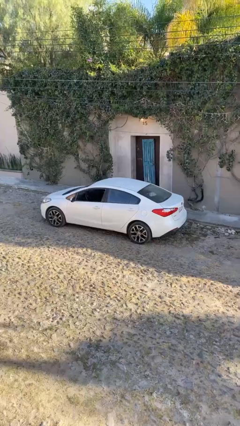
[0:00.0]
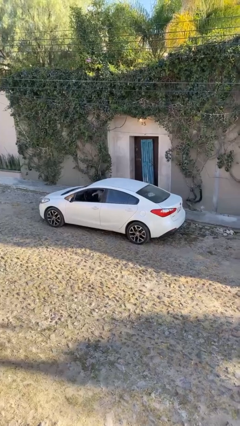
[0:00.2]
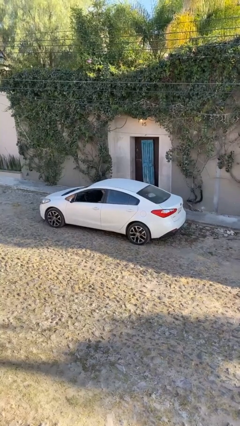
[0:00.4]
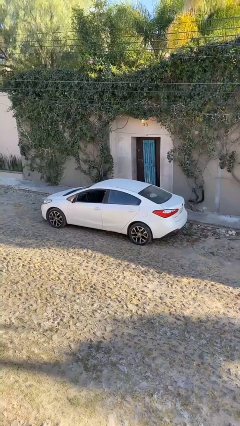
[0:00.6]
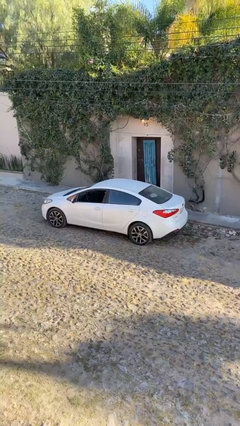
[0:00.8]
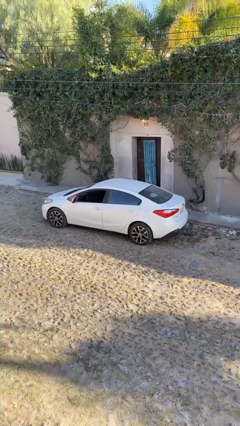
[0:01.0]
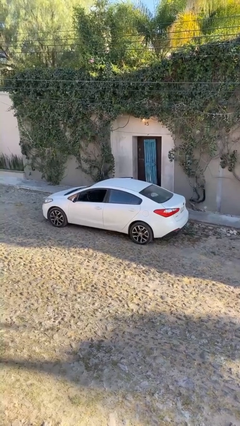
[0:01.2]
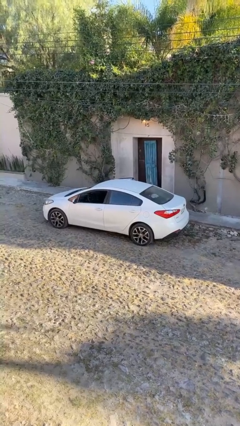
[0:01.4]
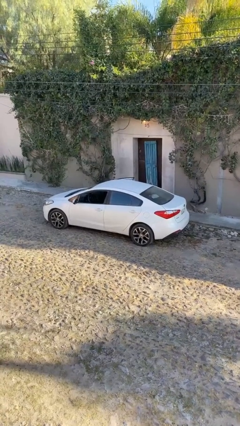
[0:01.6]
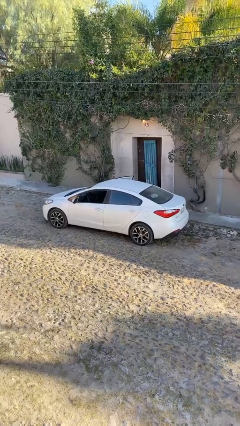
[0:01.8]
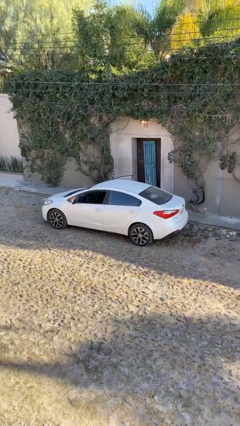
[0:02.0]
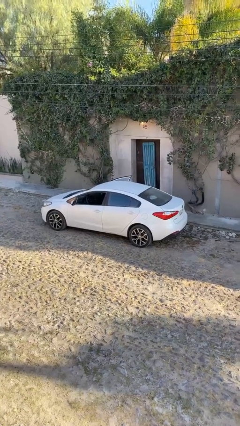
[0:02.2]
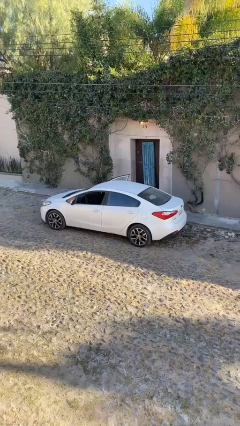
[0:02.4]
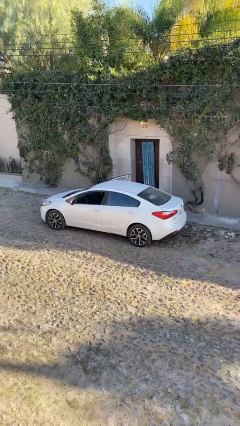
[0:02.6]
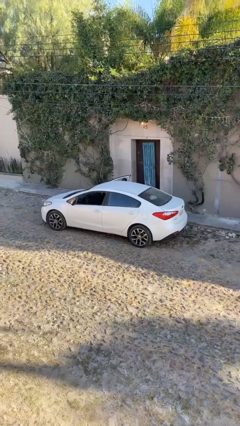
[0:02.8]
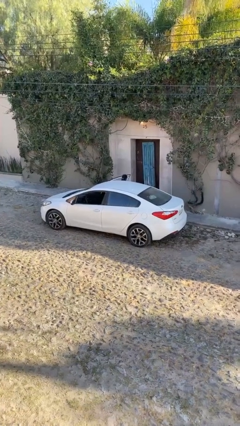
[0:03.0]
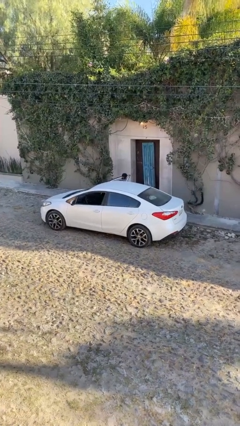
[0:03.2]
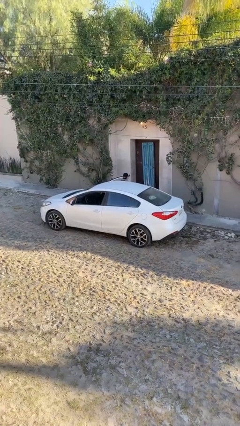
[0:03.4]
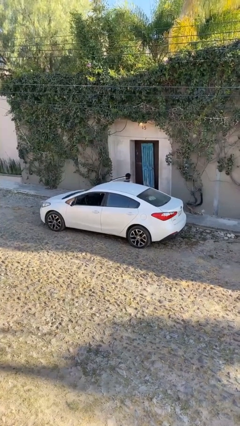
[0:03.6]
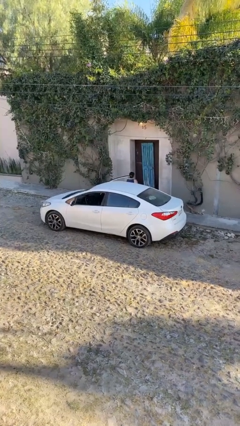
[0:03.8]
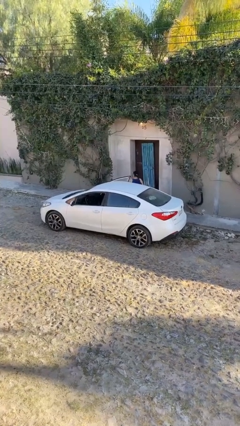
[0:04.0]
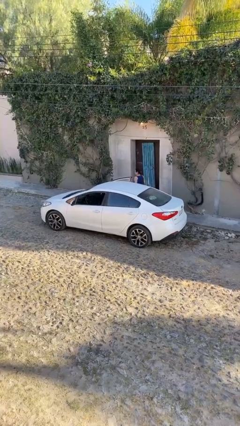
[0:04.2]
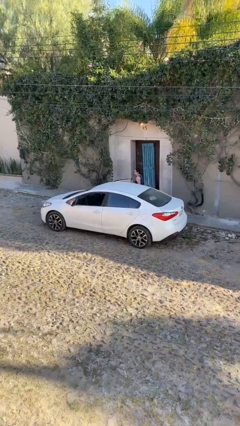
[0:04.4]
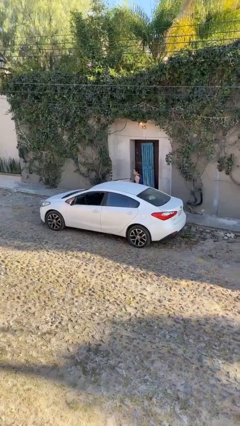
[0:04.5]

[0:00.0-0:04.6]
car drops off person

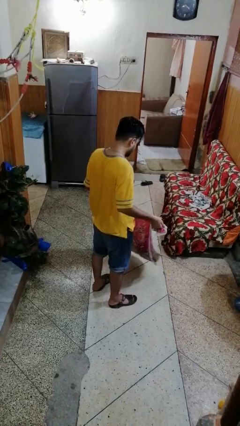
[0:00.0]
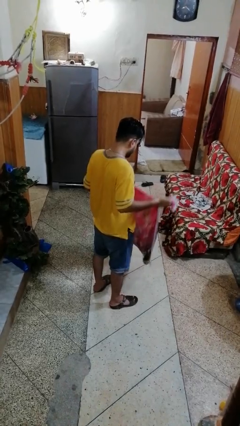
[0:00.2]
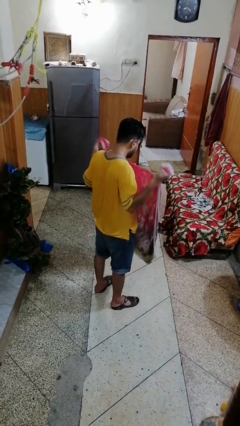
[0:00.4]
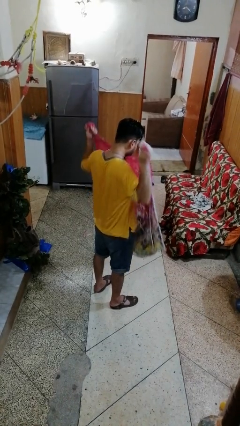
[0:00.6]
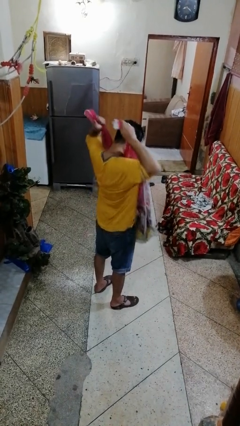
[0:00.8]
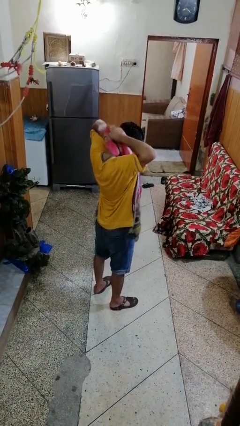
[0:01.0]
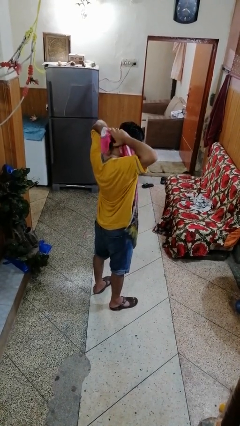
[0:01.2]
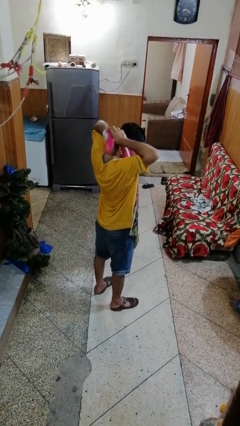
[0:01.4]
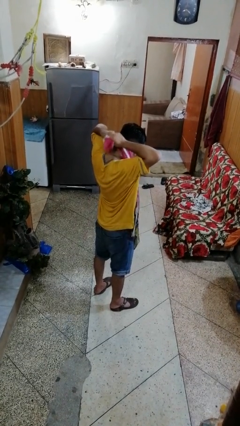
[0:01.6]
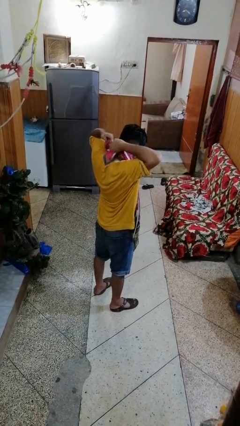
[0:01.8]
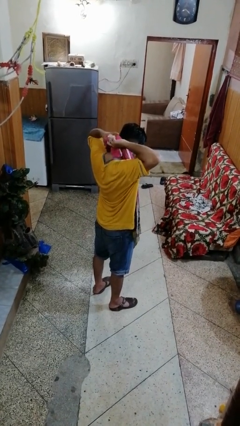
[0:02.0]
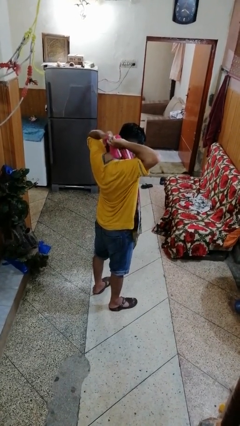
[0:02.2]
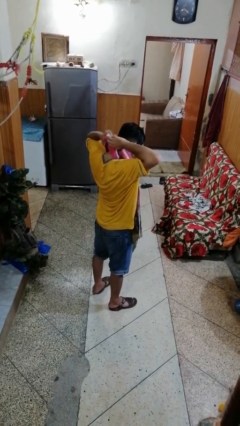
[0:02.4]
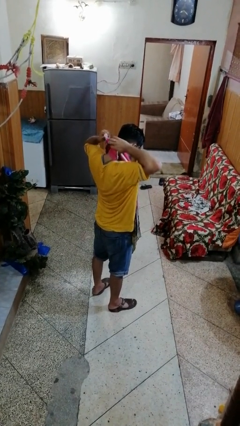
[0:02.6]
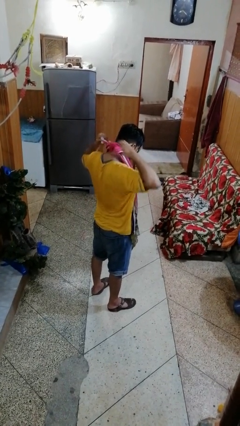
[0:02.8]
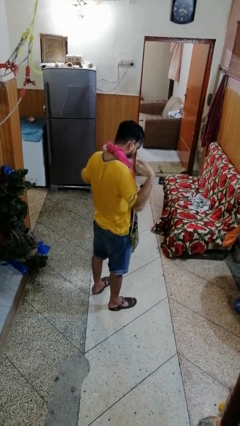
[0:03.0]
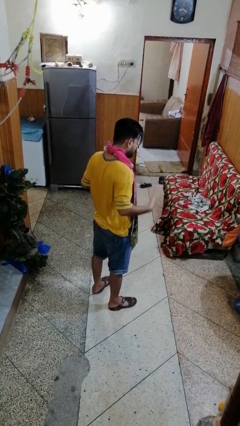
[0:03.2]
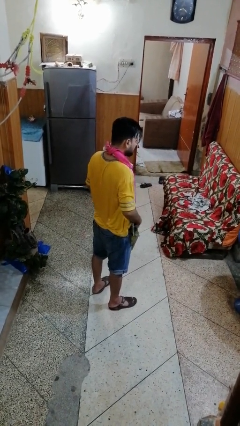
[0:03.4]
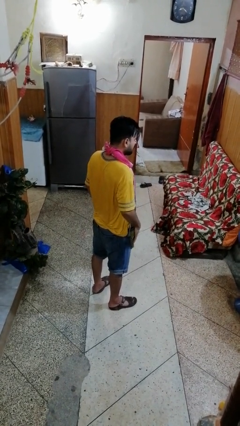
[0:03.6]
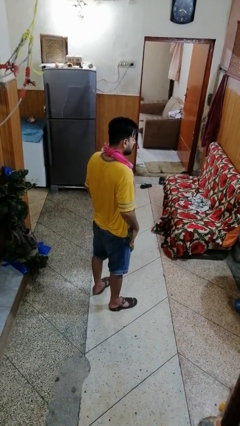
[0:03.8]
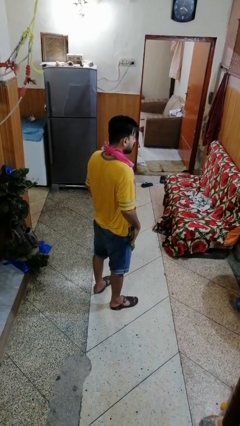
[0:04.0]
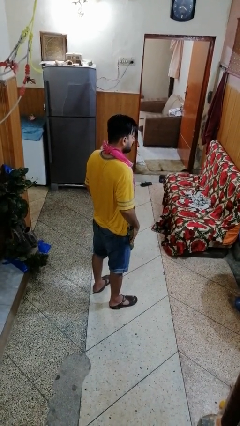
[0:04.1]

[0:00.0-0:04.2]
person puts on apron

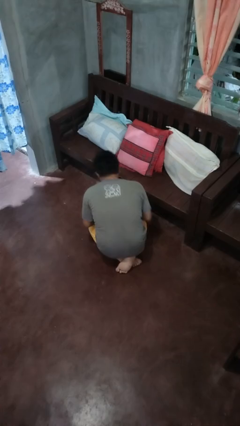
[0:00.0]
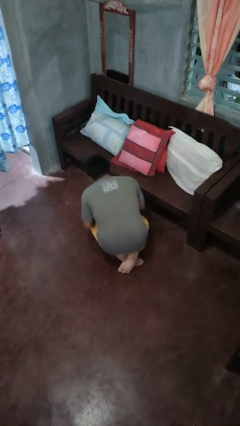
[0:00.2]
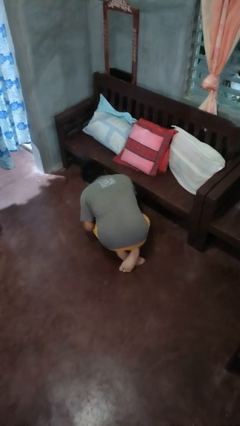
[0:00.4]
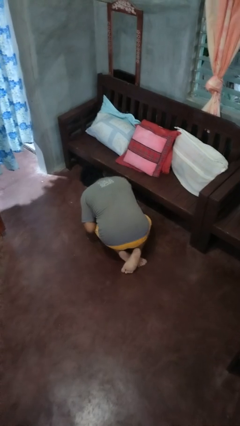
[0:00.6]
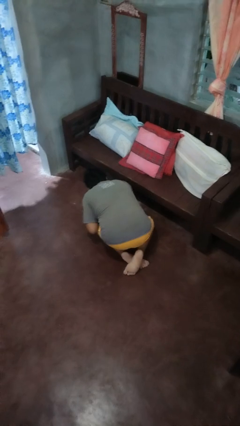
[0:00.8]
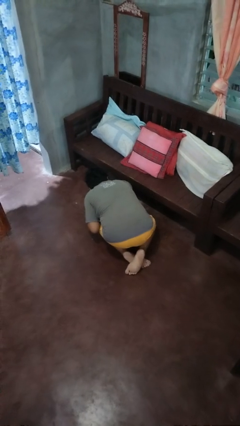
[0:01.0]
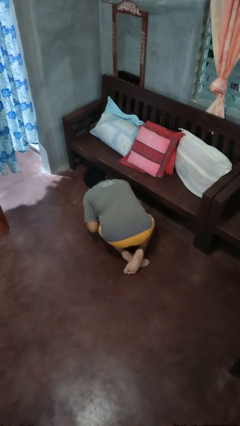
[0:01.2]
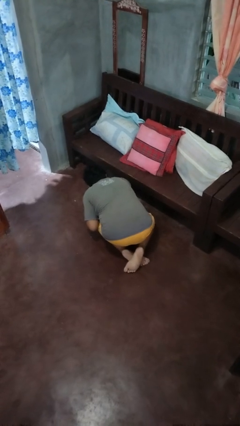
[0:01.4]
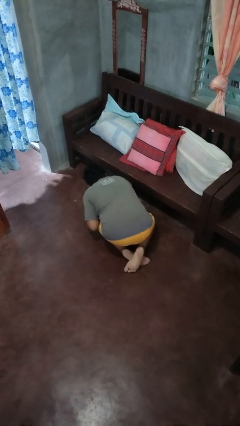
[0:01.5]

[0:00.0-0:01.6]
person searches under couch

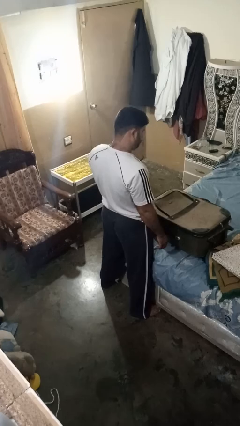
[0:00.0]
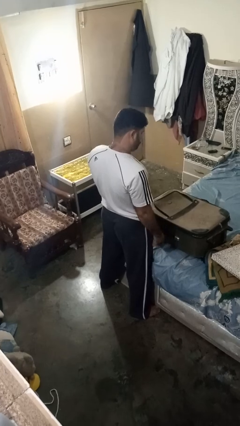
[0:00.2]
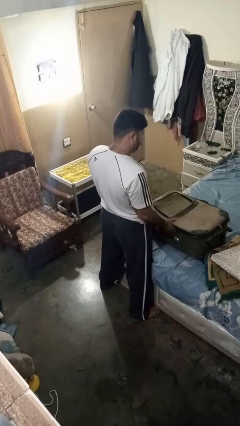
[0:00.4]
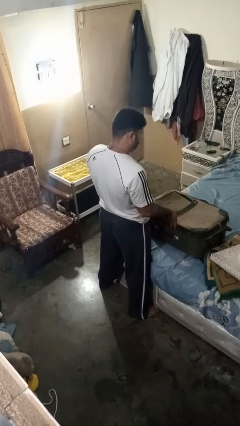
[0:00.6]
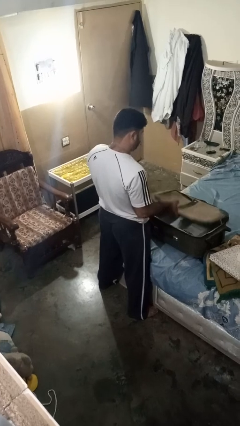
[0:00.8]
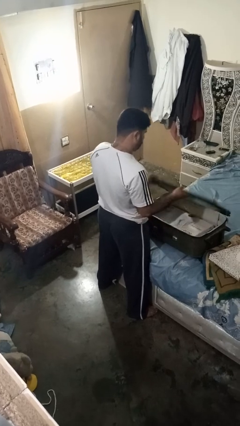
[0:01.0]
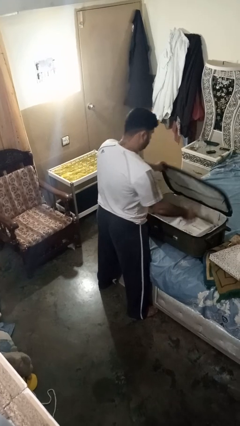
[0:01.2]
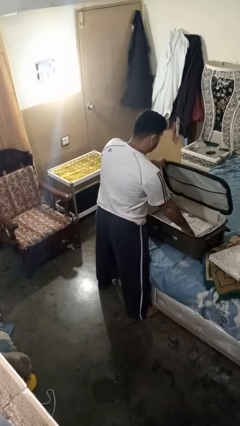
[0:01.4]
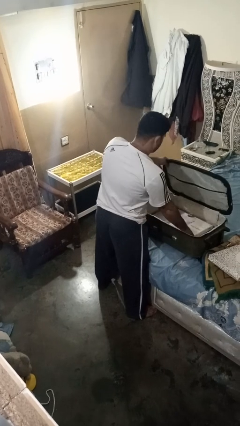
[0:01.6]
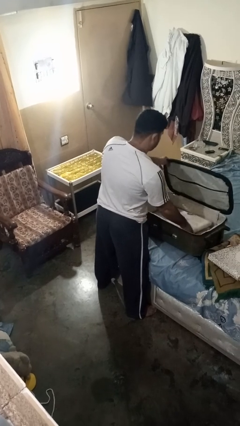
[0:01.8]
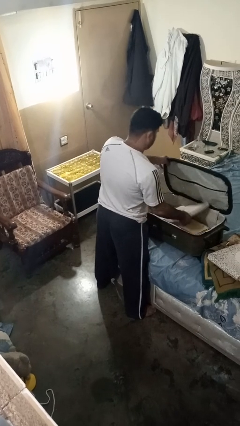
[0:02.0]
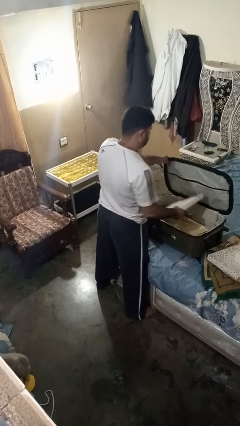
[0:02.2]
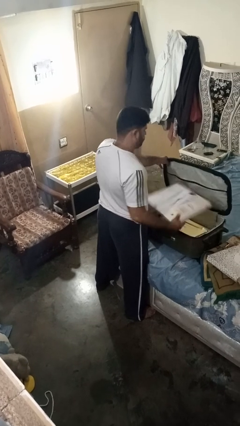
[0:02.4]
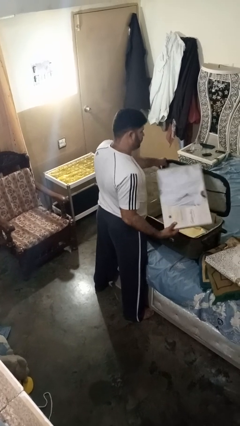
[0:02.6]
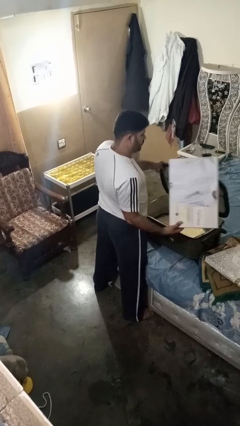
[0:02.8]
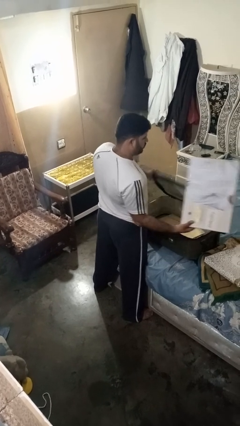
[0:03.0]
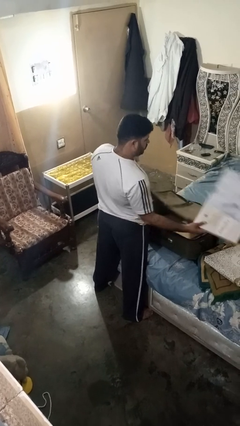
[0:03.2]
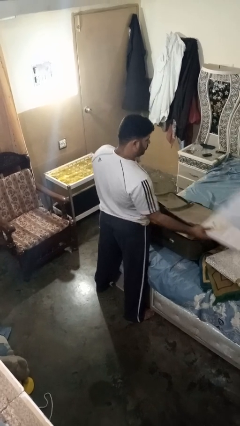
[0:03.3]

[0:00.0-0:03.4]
person unloads clothes from suitcase

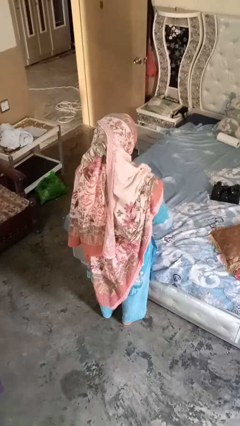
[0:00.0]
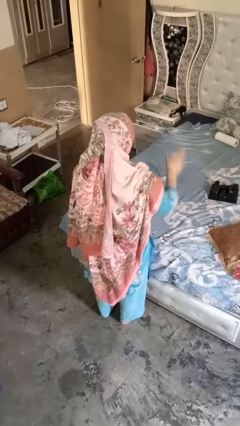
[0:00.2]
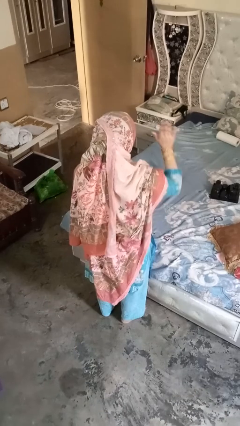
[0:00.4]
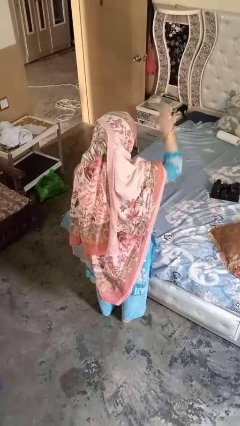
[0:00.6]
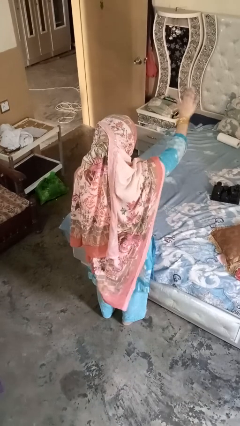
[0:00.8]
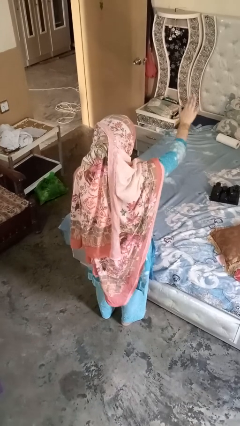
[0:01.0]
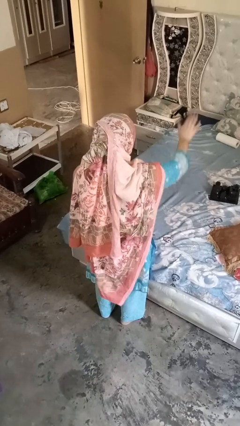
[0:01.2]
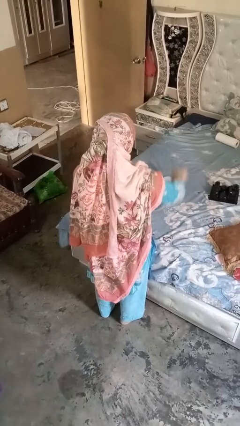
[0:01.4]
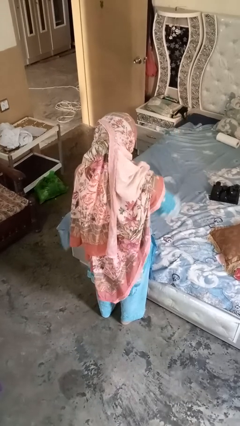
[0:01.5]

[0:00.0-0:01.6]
person gestures stop

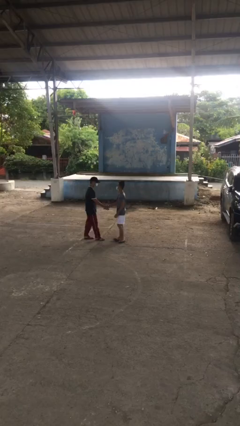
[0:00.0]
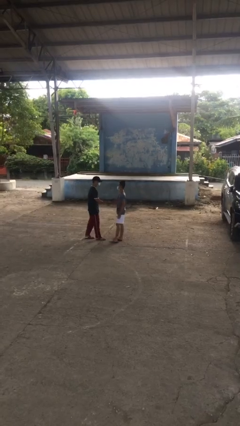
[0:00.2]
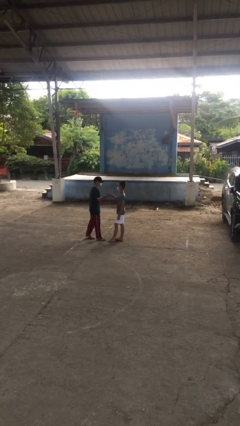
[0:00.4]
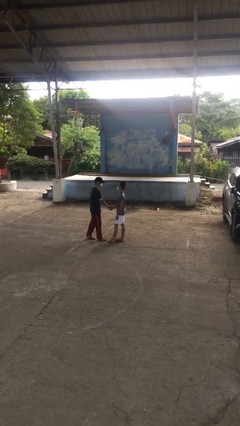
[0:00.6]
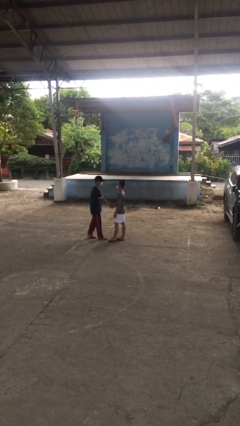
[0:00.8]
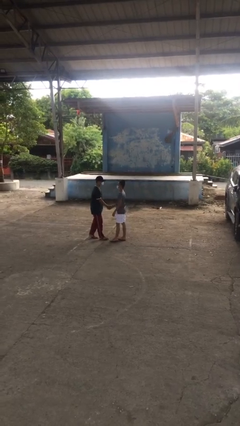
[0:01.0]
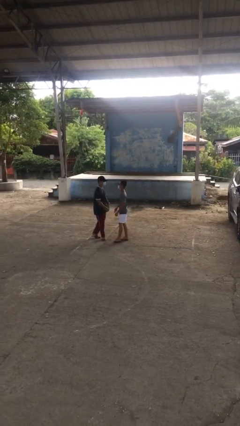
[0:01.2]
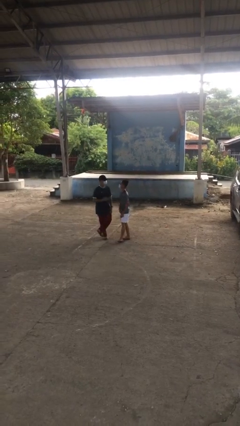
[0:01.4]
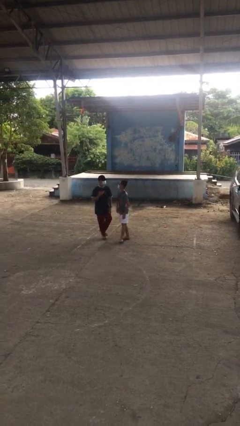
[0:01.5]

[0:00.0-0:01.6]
person shakes hand

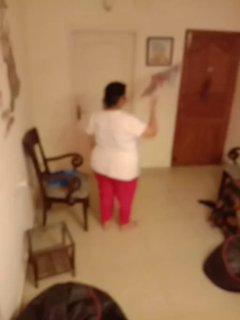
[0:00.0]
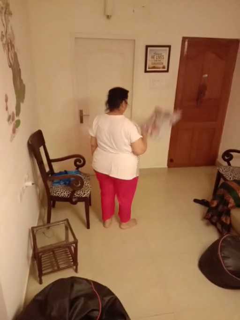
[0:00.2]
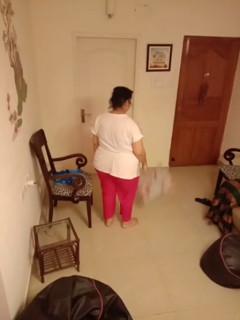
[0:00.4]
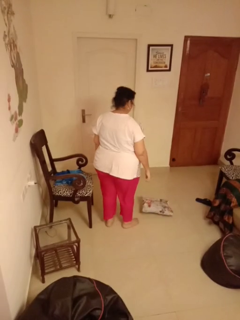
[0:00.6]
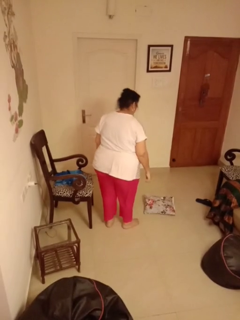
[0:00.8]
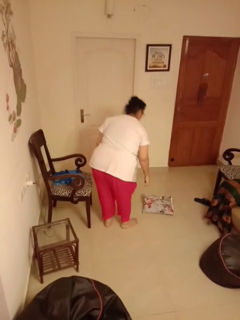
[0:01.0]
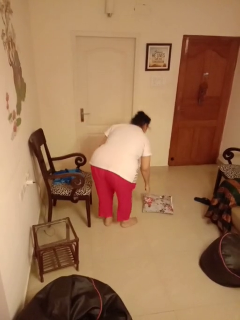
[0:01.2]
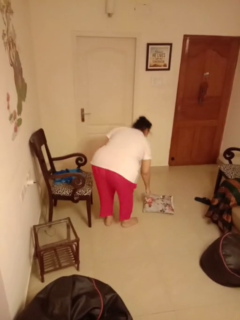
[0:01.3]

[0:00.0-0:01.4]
person throws object into air
